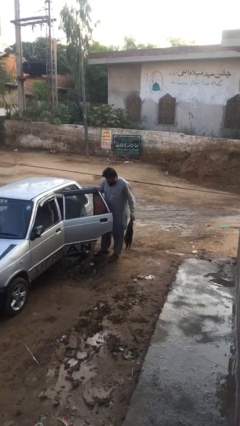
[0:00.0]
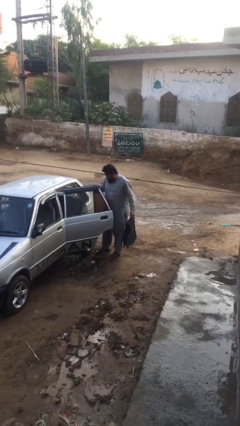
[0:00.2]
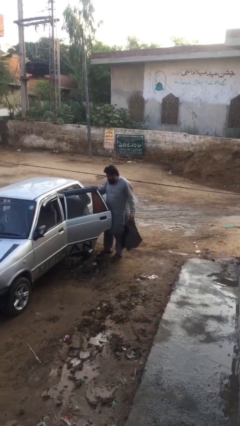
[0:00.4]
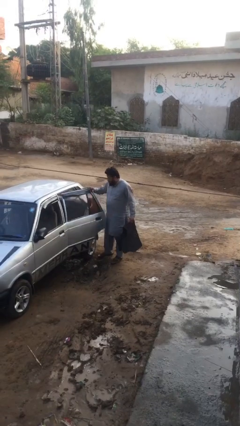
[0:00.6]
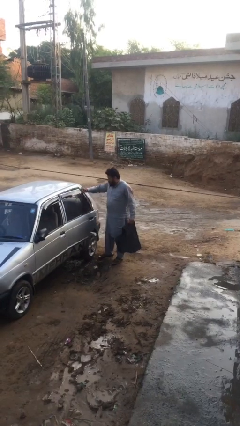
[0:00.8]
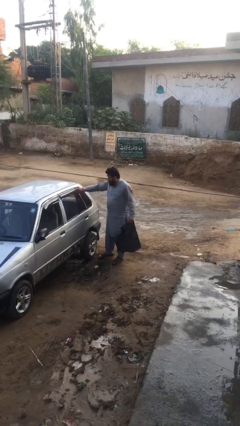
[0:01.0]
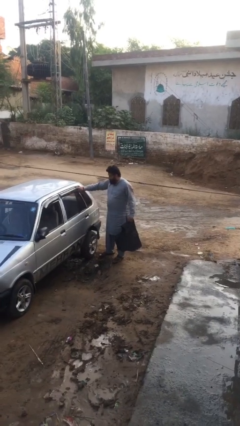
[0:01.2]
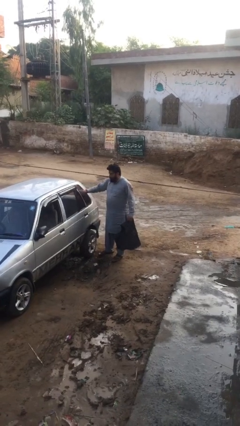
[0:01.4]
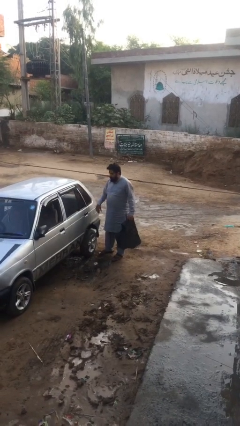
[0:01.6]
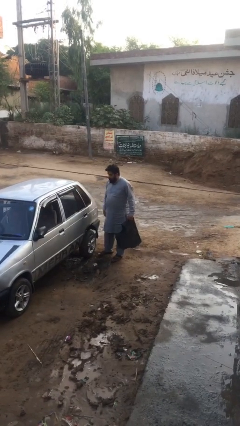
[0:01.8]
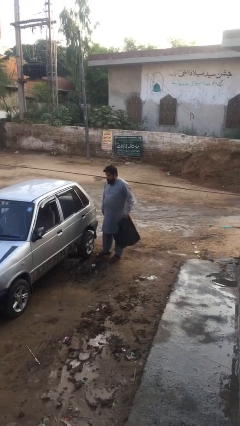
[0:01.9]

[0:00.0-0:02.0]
person closes car door

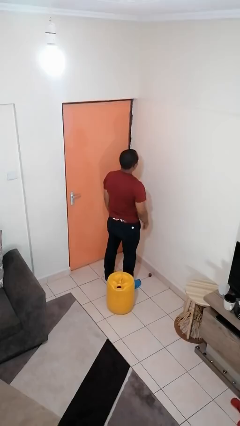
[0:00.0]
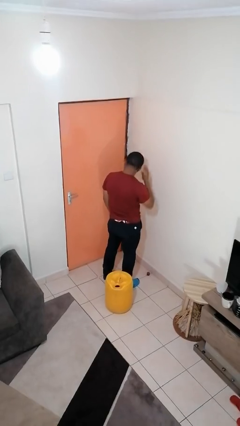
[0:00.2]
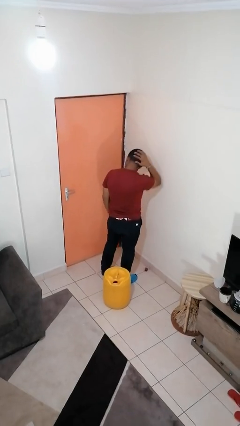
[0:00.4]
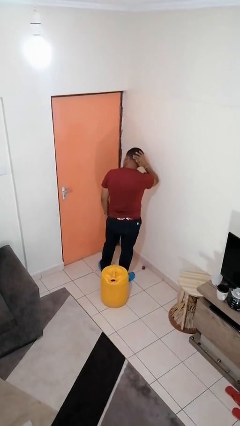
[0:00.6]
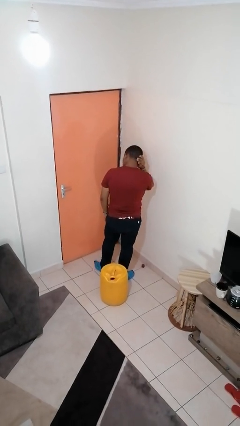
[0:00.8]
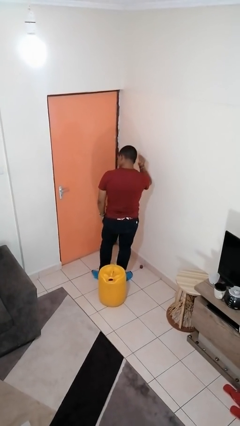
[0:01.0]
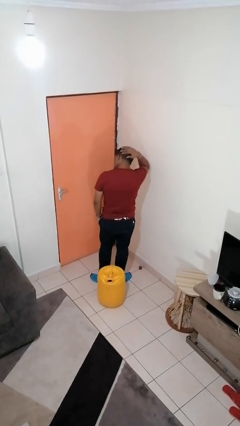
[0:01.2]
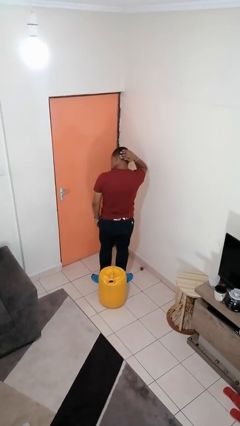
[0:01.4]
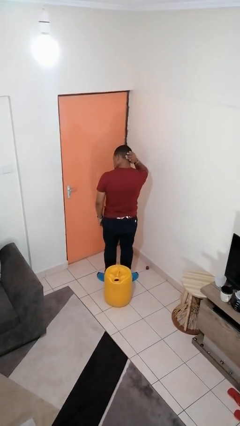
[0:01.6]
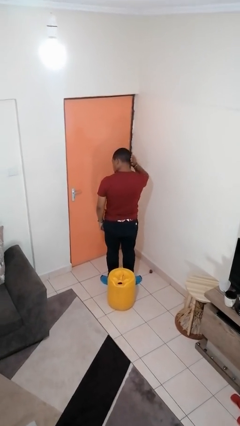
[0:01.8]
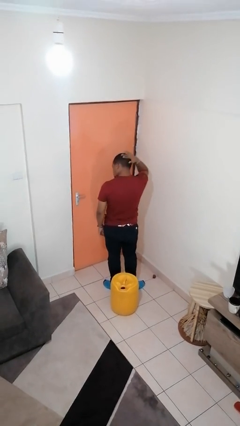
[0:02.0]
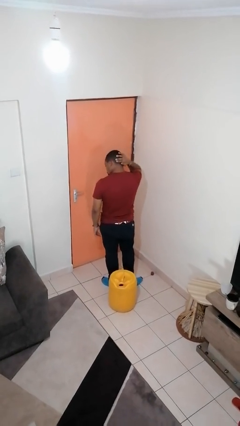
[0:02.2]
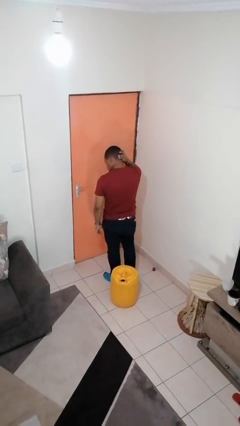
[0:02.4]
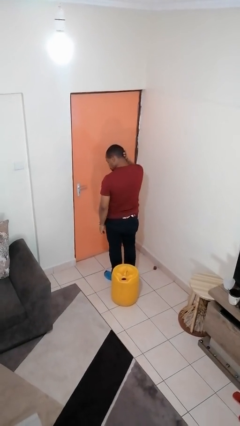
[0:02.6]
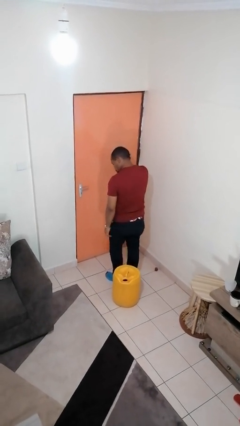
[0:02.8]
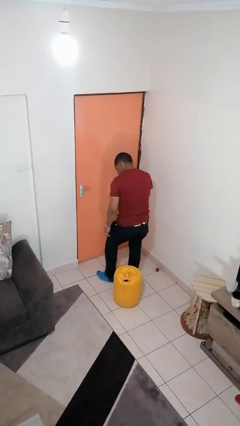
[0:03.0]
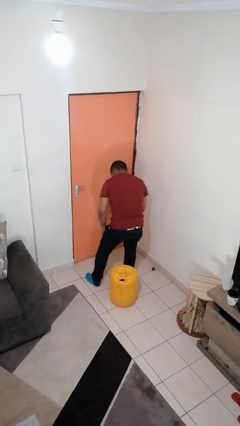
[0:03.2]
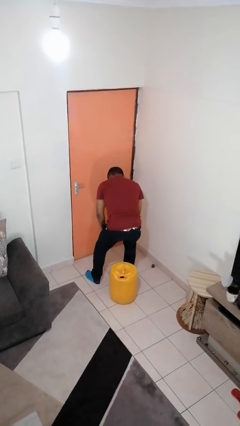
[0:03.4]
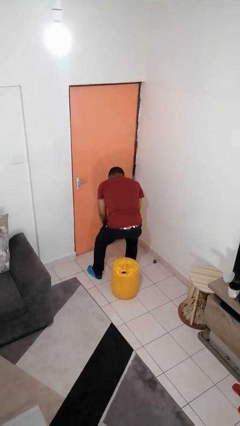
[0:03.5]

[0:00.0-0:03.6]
person strokes hair

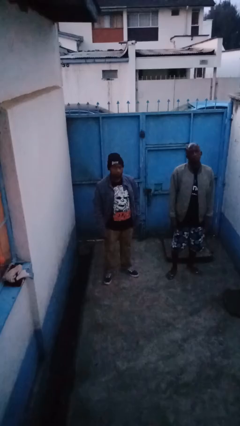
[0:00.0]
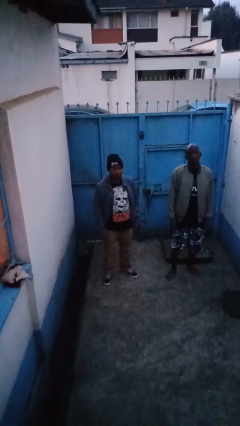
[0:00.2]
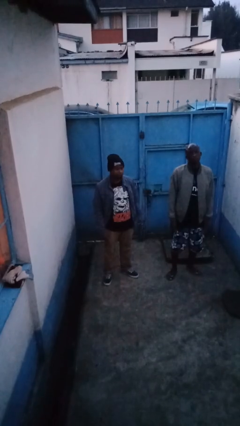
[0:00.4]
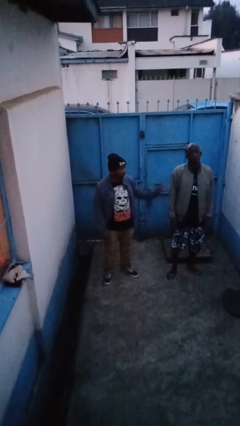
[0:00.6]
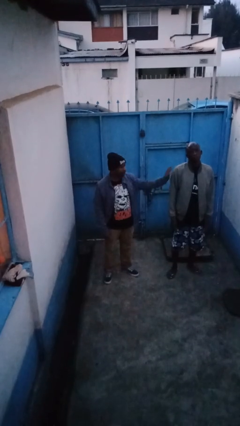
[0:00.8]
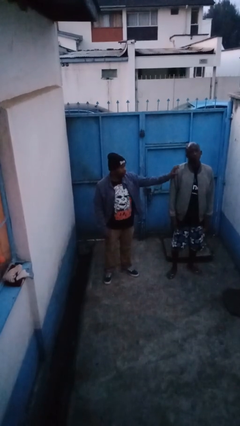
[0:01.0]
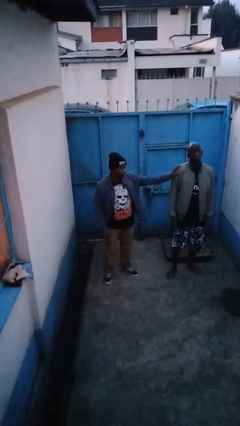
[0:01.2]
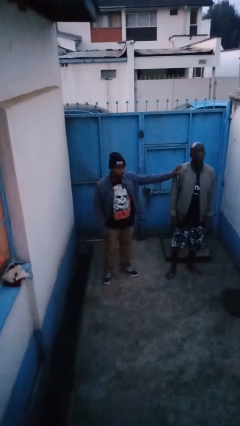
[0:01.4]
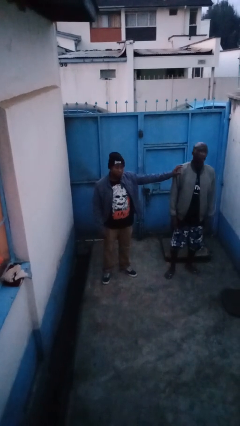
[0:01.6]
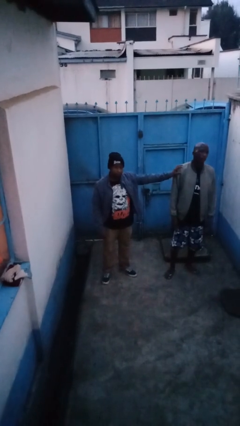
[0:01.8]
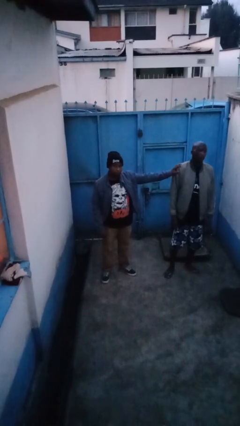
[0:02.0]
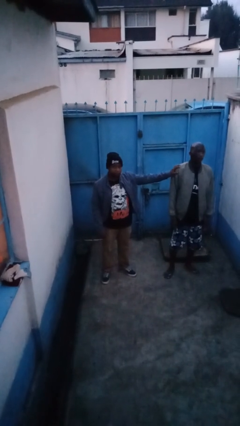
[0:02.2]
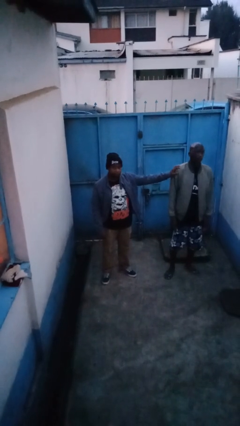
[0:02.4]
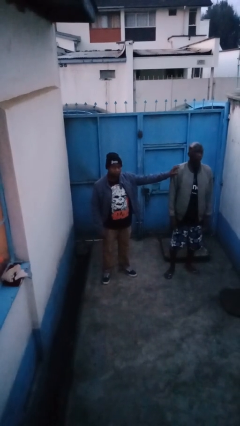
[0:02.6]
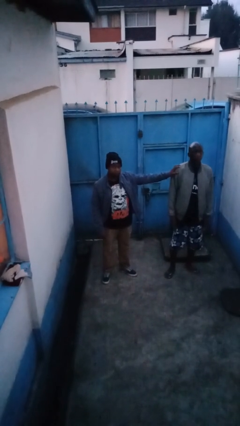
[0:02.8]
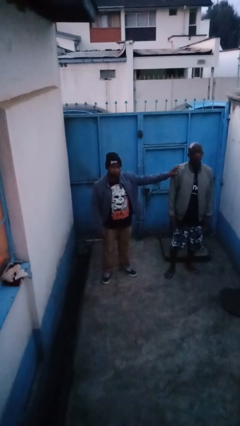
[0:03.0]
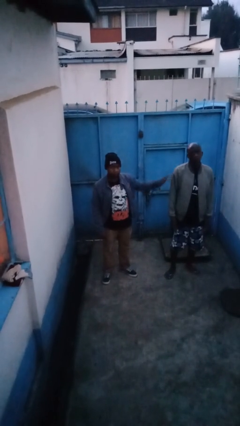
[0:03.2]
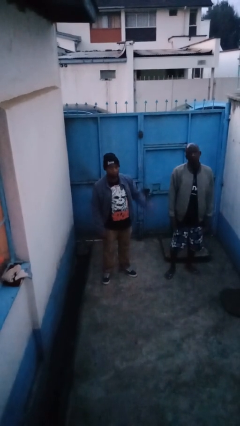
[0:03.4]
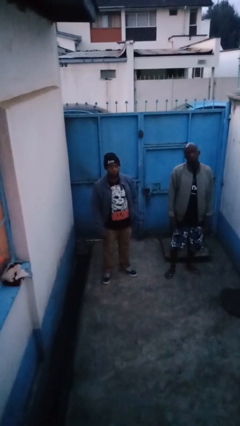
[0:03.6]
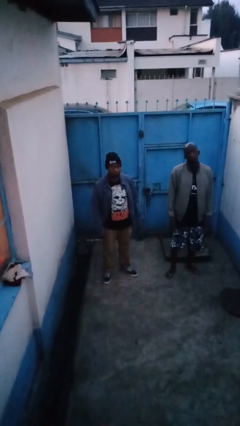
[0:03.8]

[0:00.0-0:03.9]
person shoves person

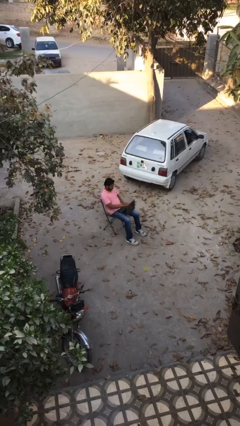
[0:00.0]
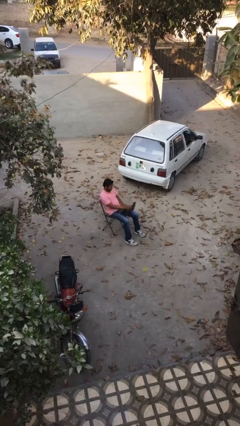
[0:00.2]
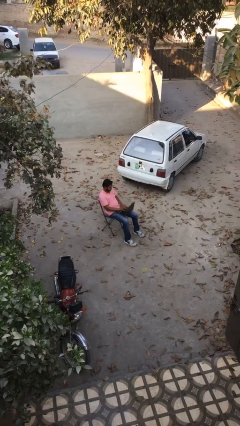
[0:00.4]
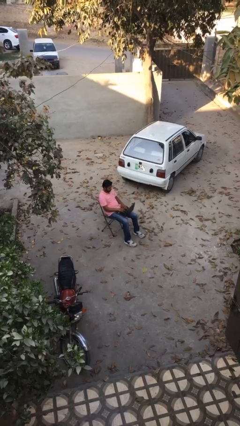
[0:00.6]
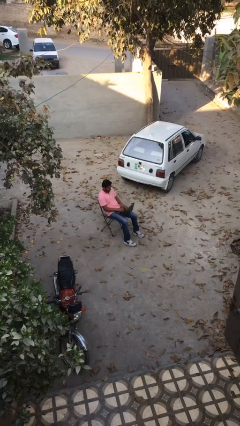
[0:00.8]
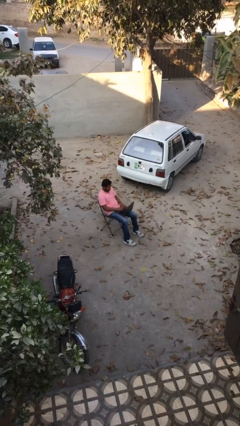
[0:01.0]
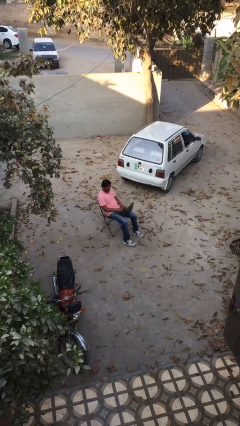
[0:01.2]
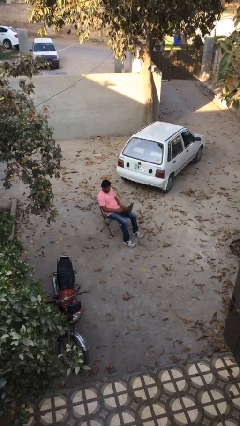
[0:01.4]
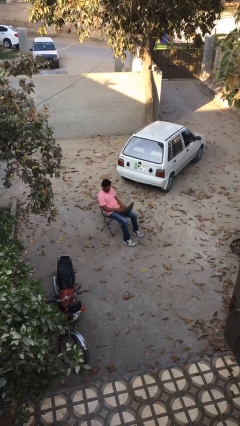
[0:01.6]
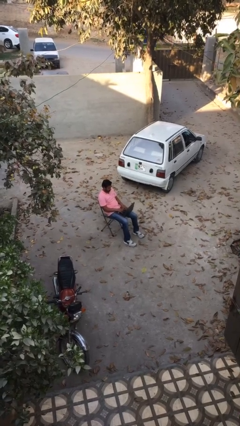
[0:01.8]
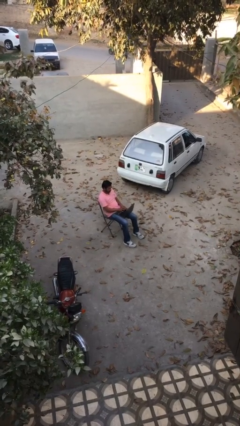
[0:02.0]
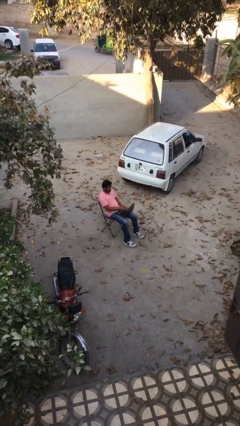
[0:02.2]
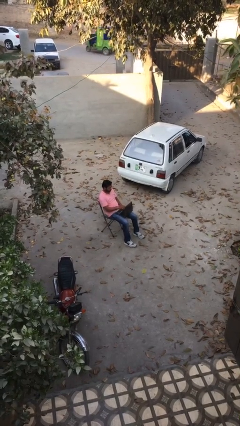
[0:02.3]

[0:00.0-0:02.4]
person interacts with laptop

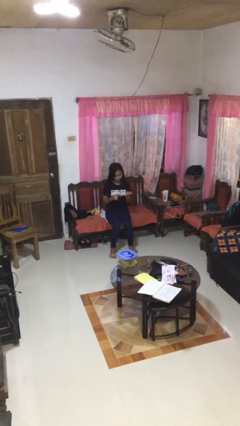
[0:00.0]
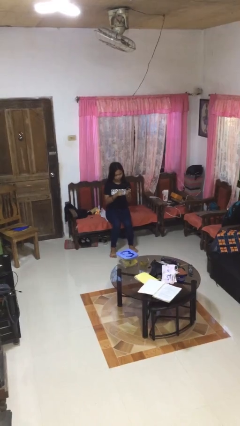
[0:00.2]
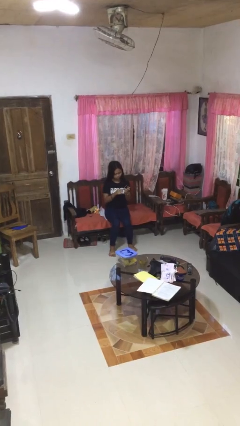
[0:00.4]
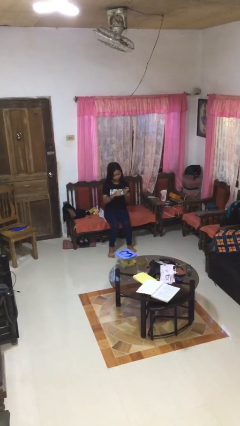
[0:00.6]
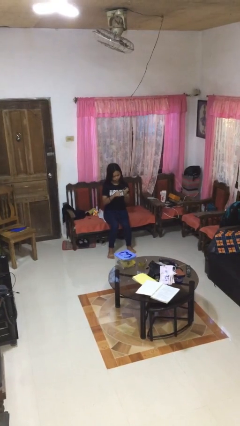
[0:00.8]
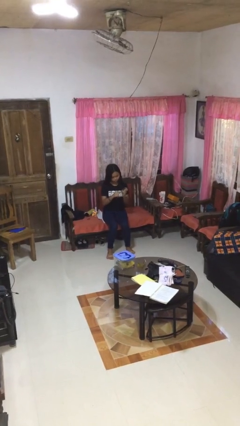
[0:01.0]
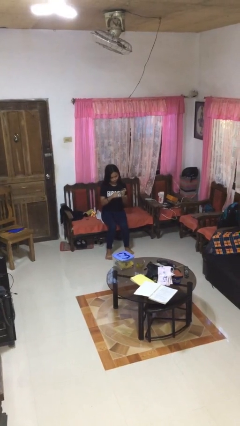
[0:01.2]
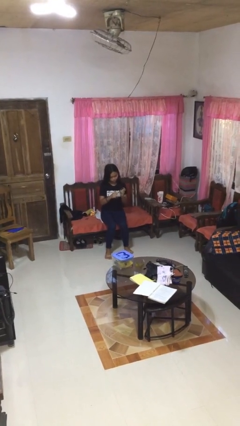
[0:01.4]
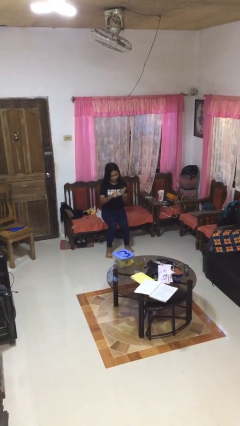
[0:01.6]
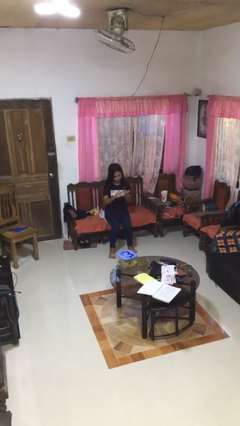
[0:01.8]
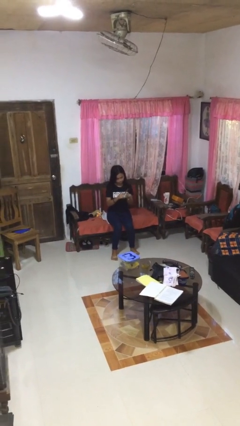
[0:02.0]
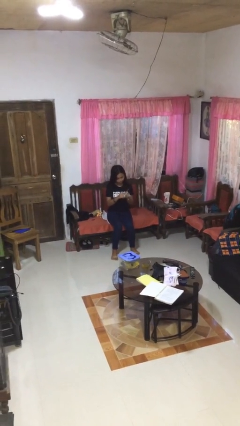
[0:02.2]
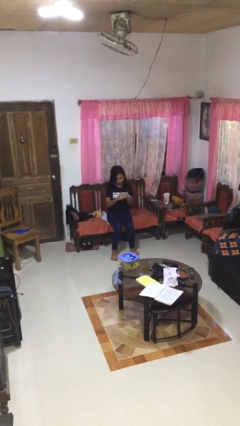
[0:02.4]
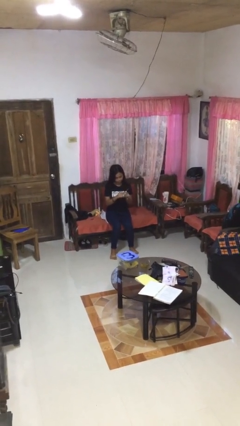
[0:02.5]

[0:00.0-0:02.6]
person files fingernails

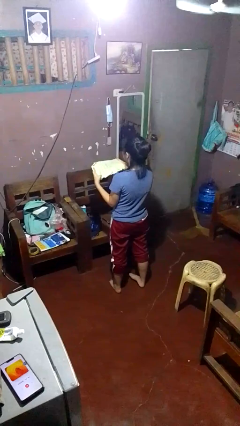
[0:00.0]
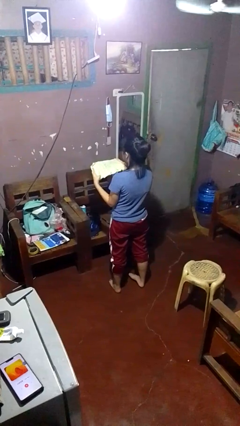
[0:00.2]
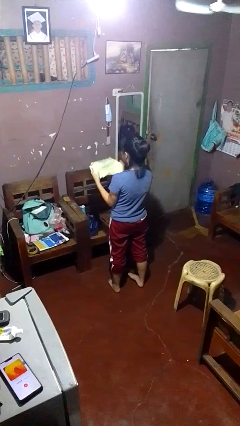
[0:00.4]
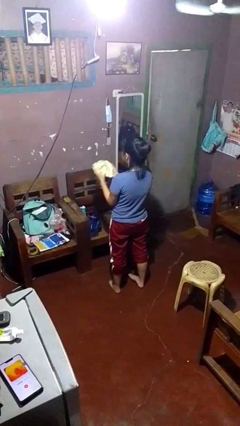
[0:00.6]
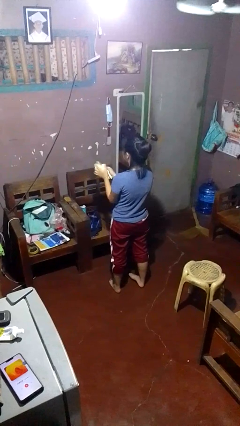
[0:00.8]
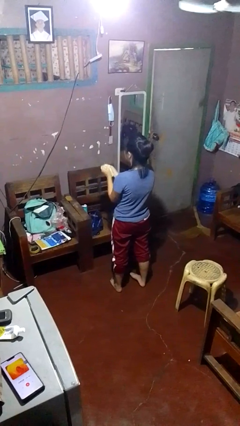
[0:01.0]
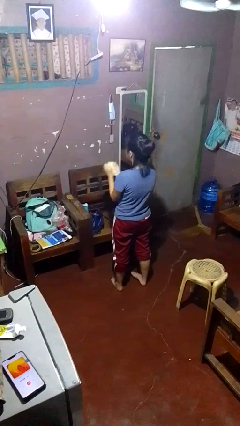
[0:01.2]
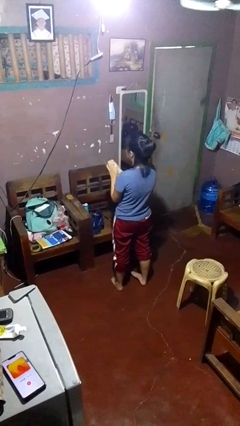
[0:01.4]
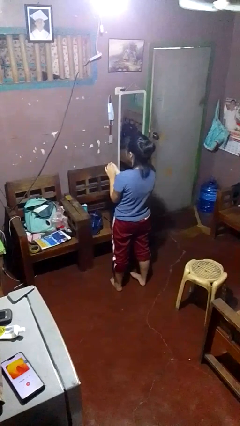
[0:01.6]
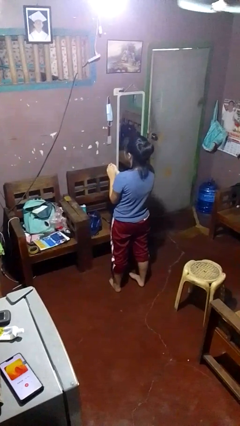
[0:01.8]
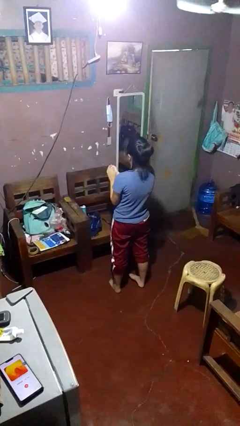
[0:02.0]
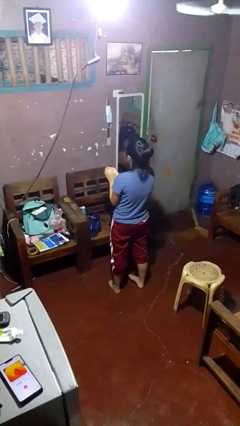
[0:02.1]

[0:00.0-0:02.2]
person crumples paper

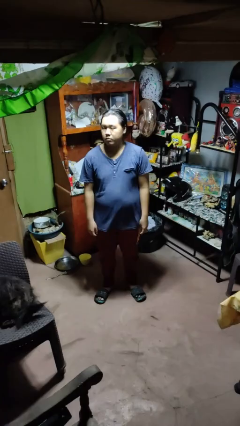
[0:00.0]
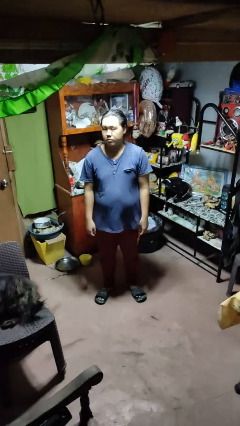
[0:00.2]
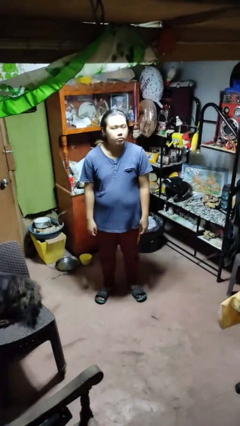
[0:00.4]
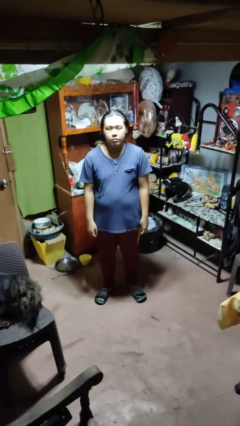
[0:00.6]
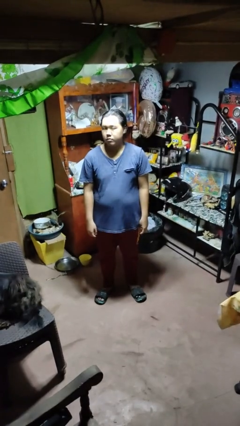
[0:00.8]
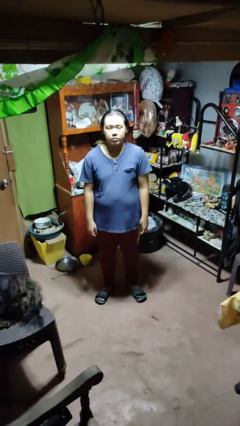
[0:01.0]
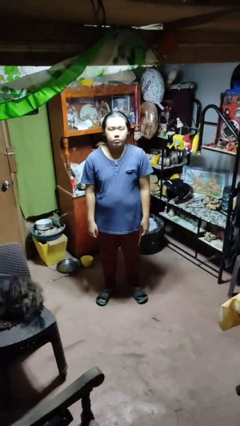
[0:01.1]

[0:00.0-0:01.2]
person shakes head
